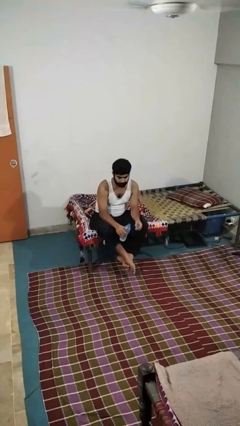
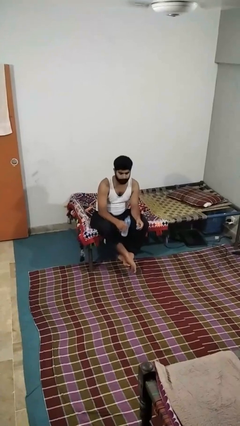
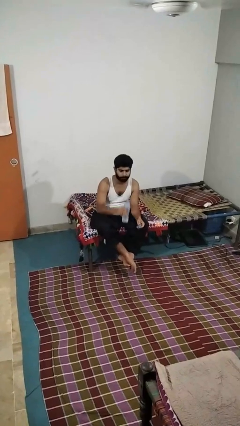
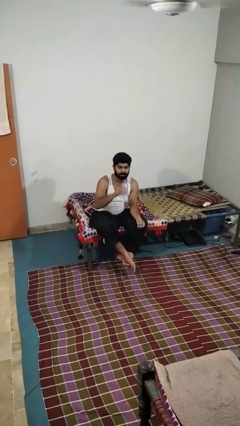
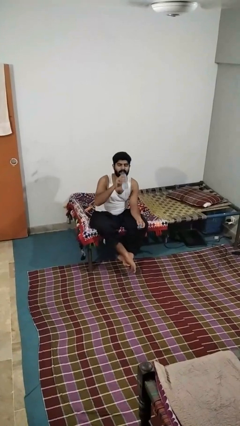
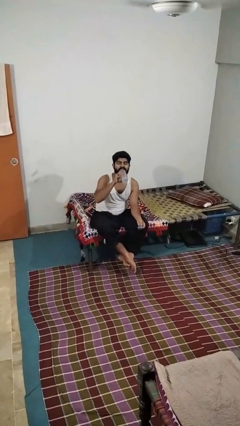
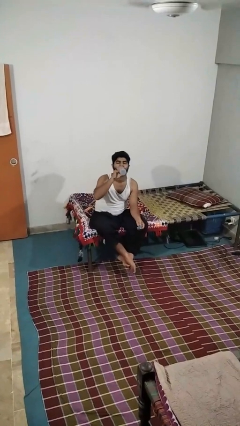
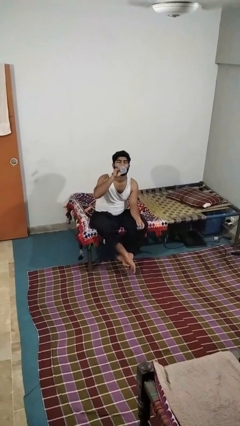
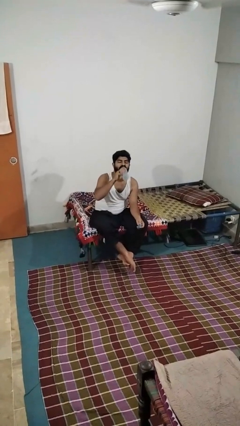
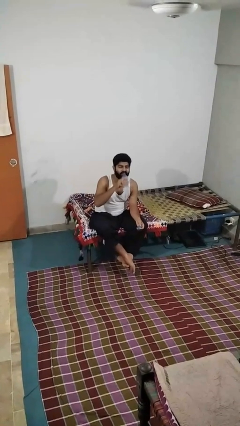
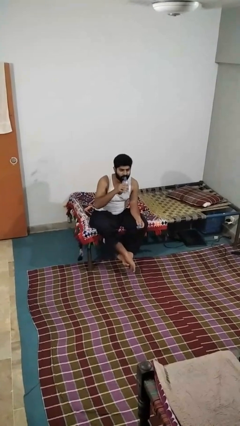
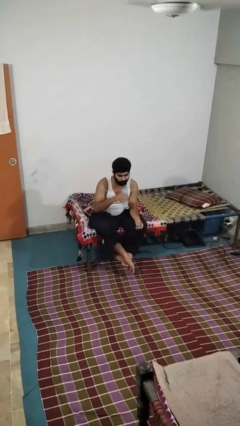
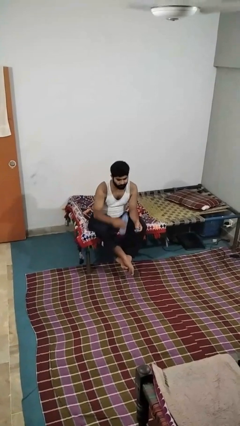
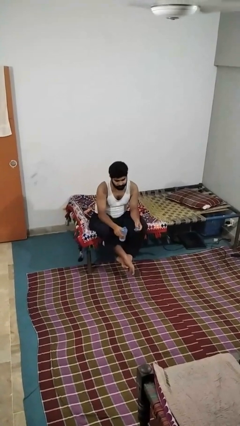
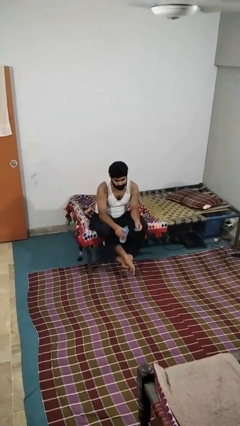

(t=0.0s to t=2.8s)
person drinks from bottle

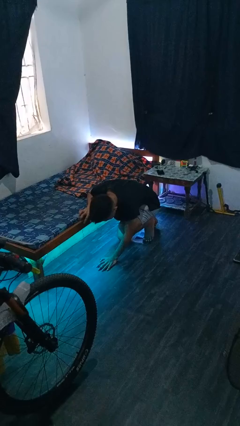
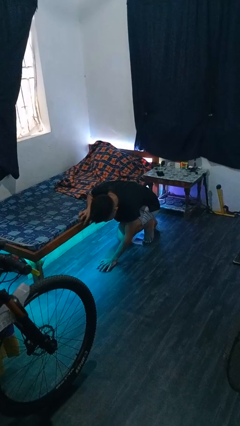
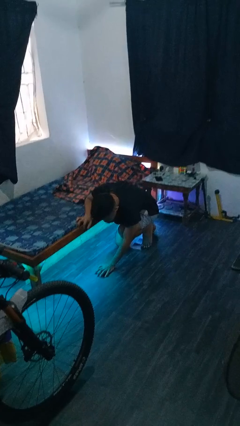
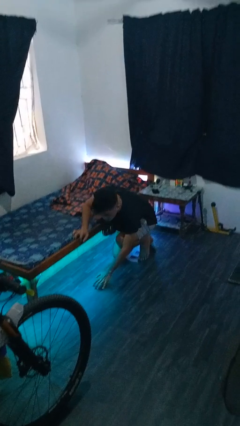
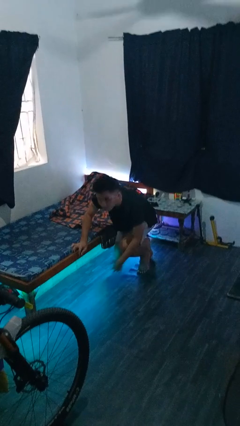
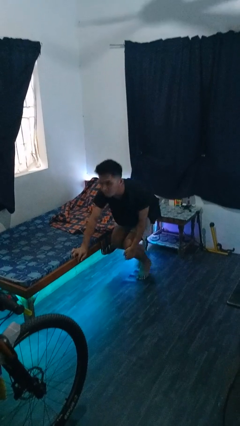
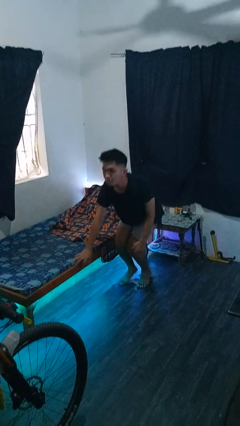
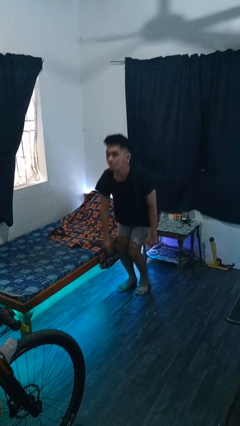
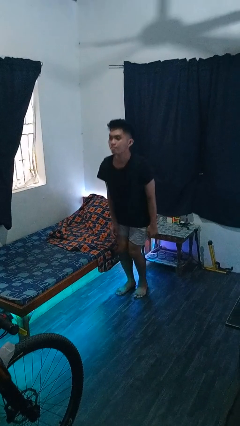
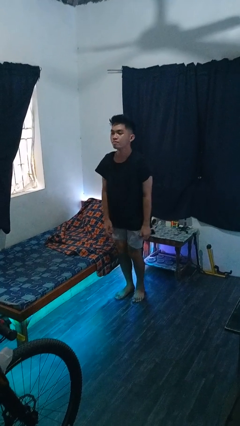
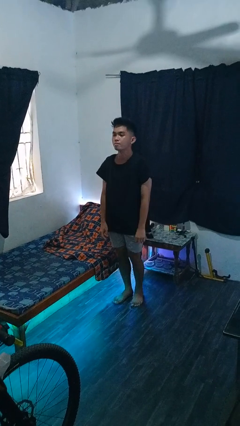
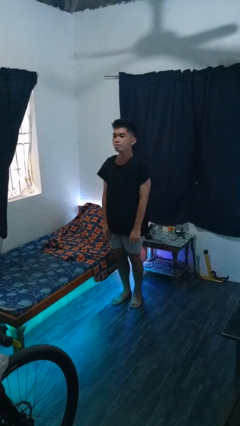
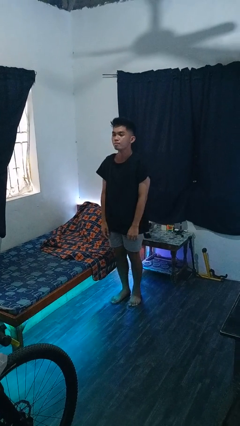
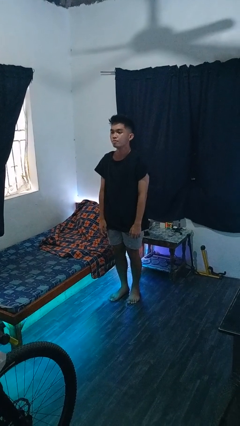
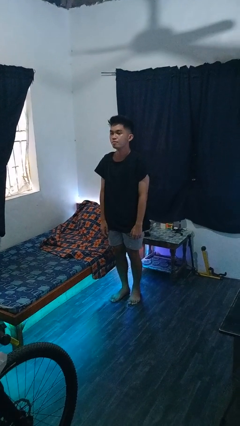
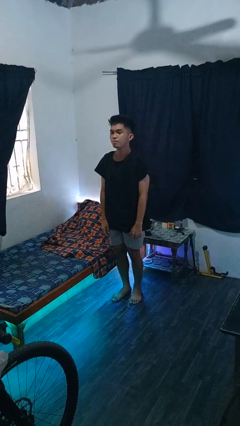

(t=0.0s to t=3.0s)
person stands up from floor

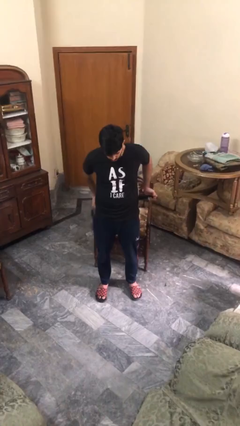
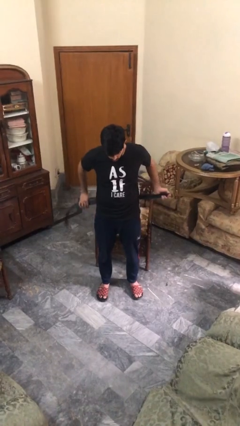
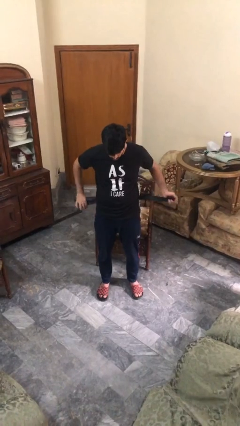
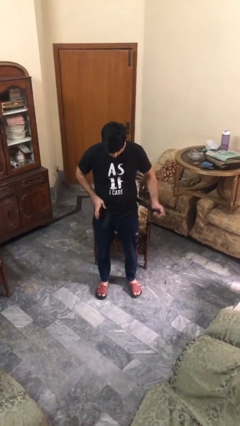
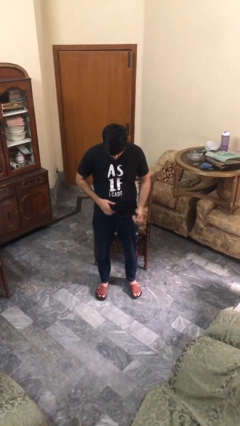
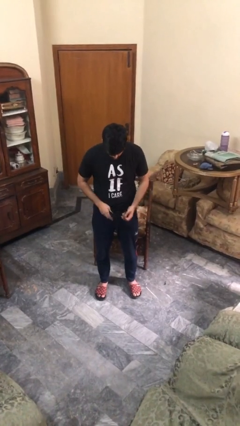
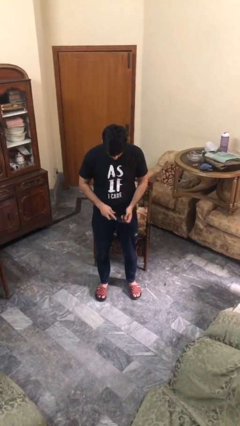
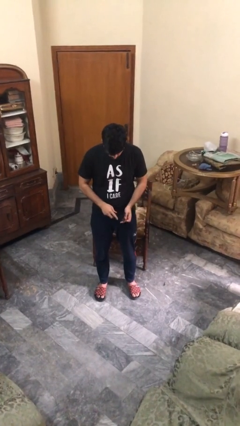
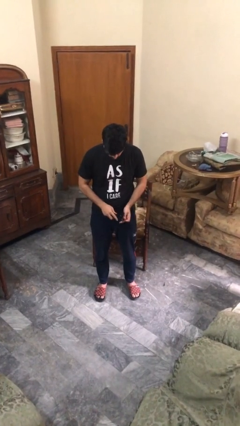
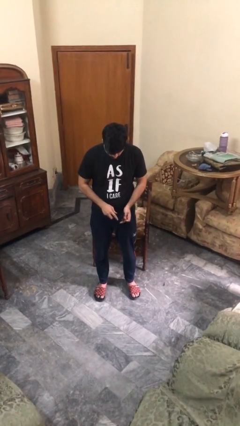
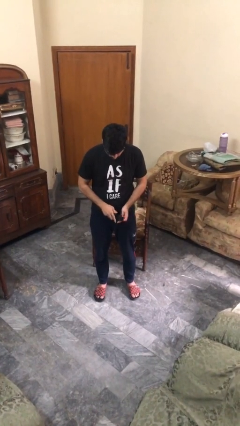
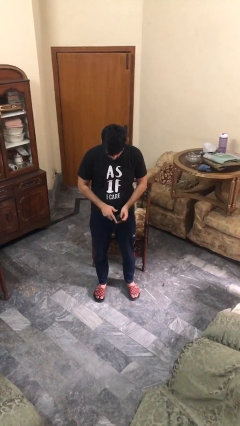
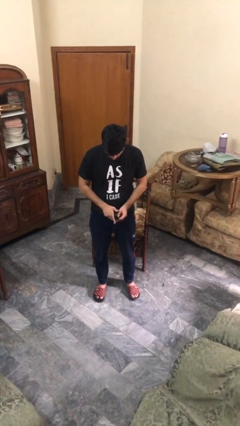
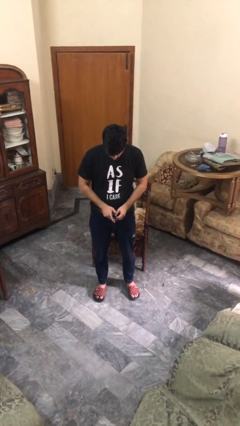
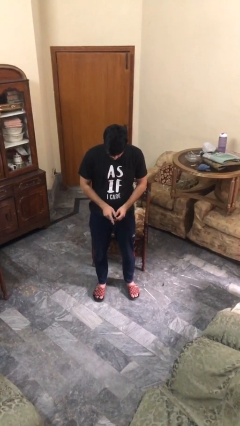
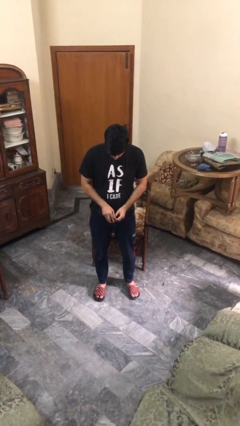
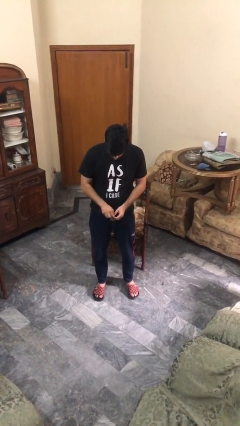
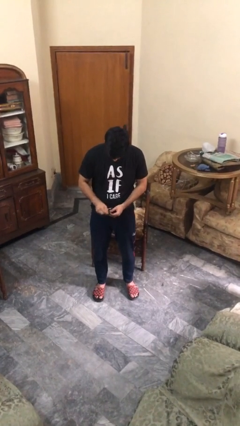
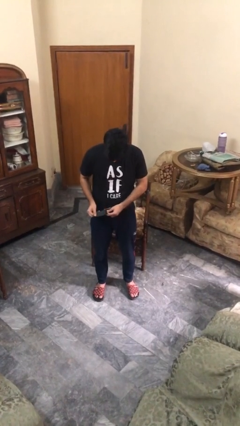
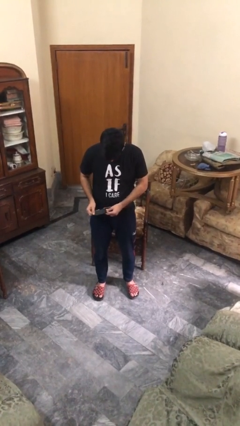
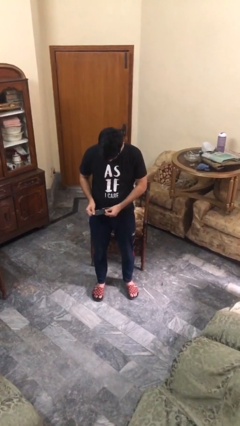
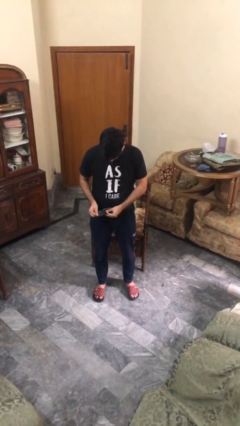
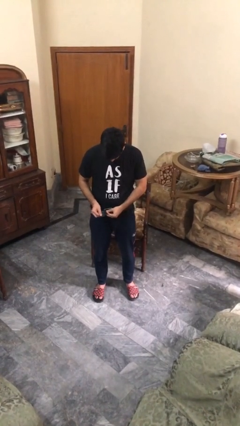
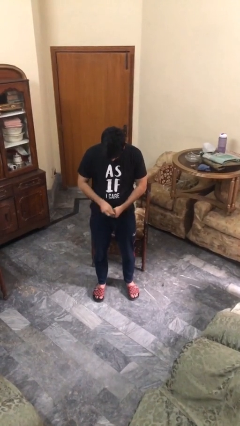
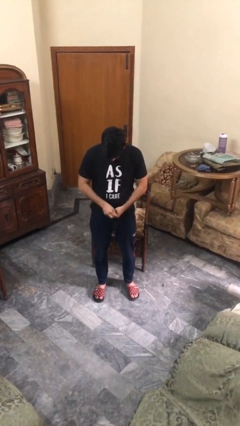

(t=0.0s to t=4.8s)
person puts on belt

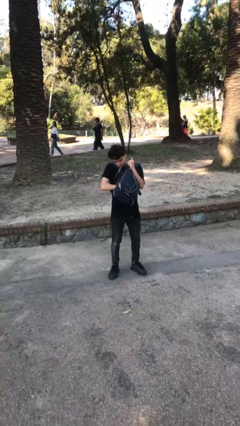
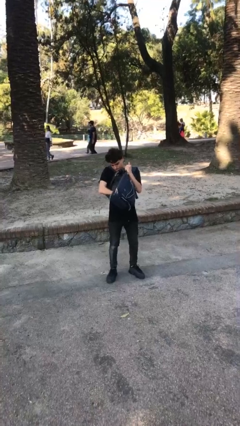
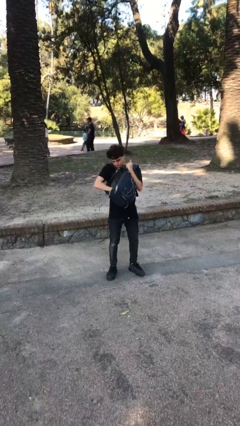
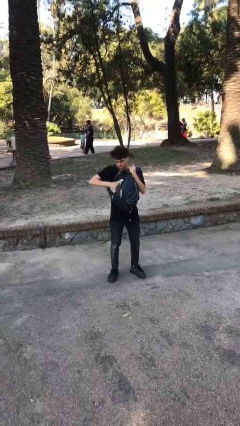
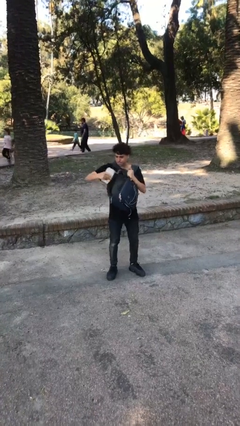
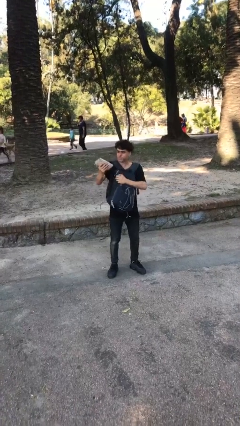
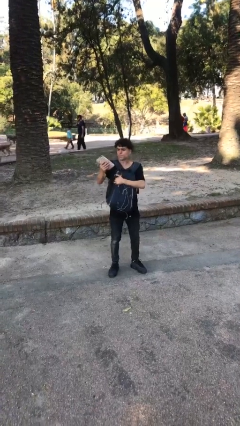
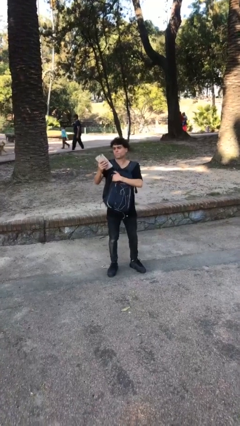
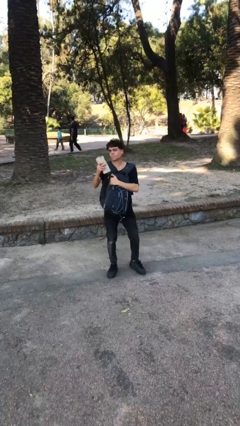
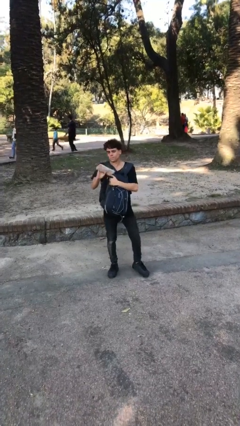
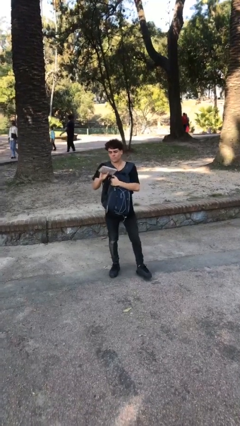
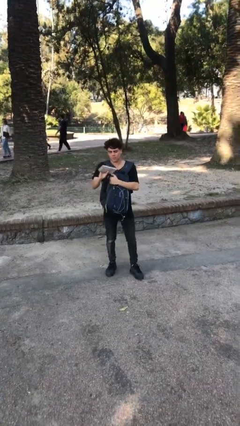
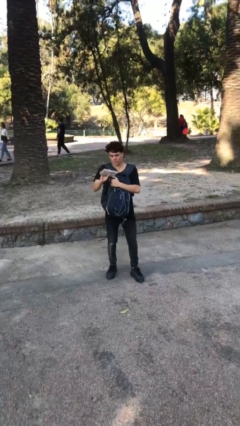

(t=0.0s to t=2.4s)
person takes object from backpack

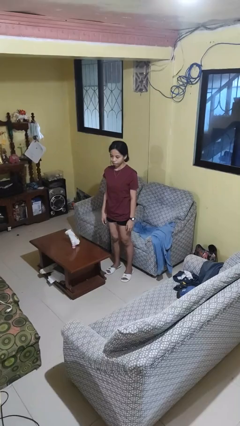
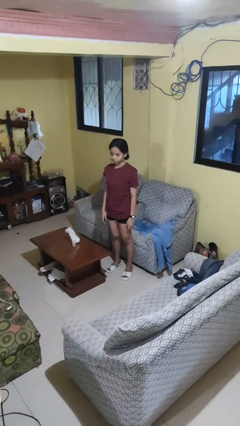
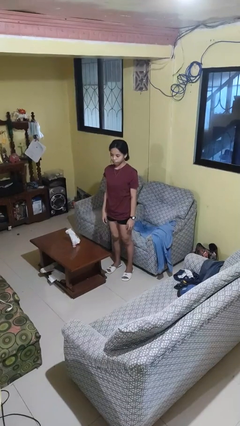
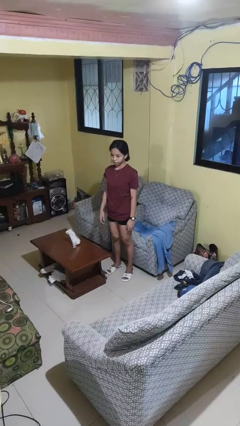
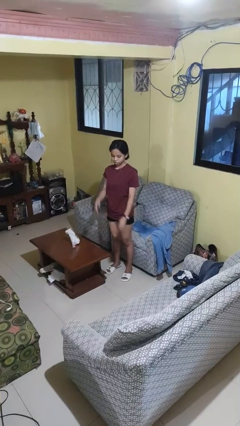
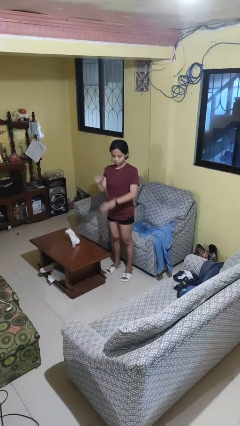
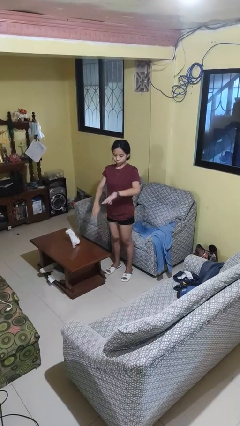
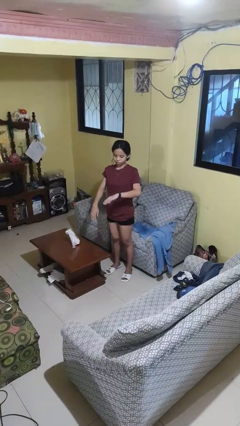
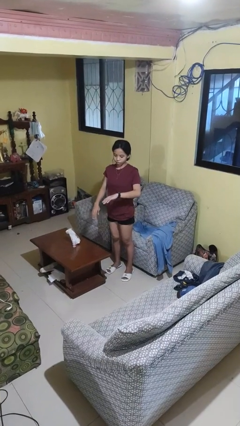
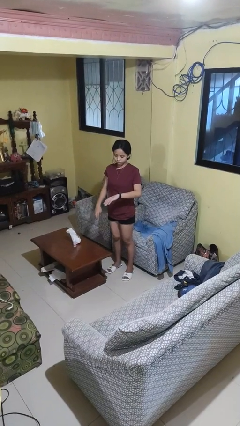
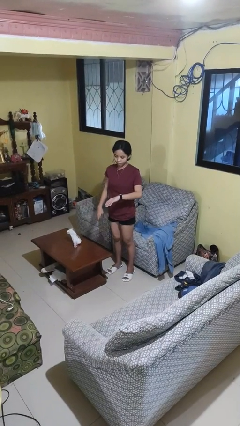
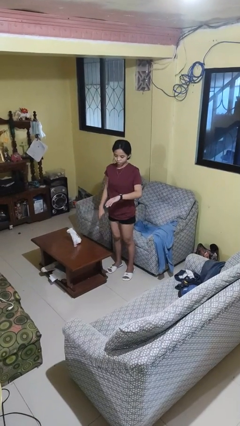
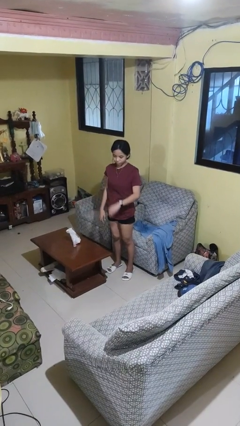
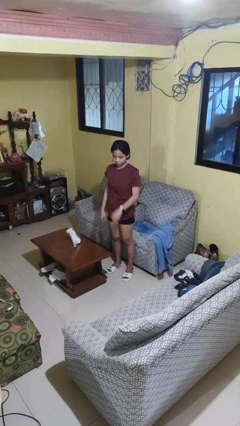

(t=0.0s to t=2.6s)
person swats bug

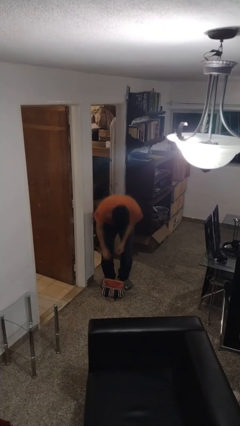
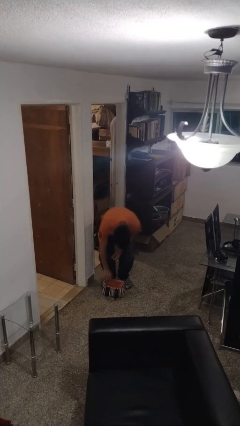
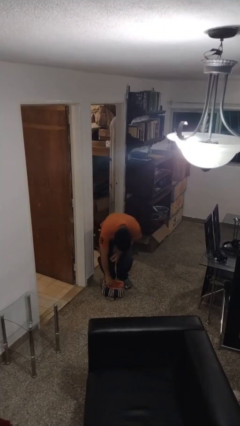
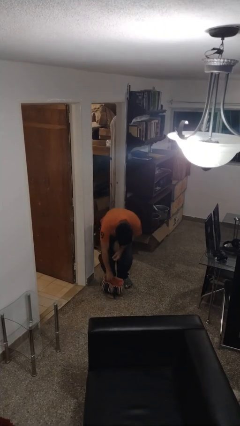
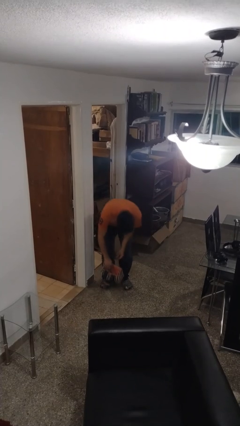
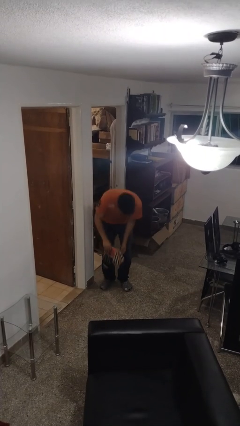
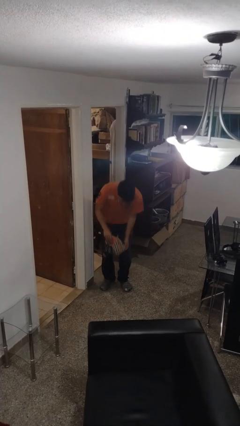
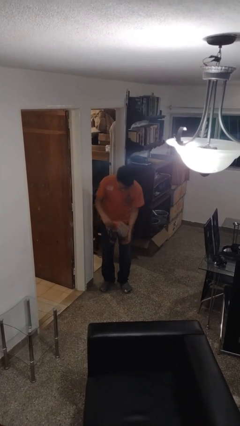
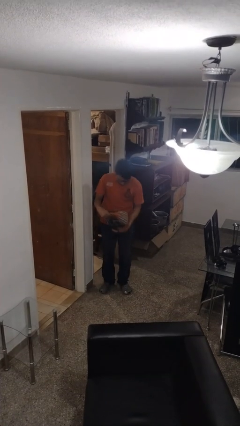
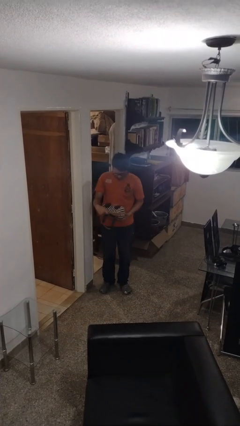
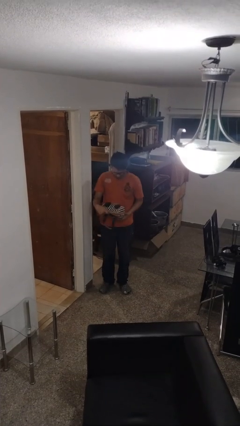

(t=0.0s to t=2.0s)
person picks up object from floor
